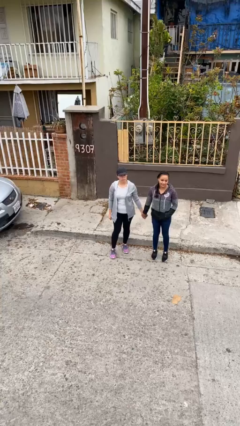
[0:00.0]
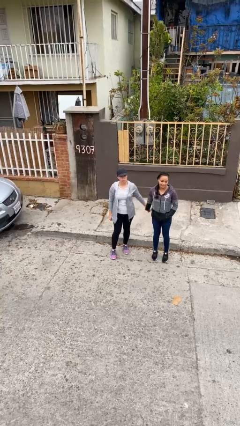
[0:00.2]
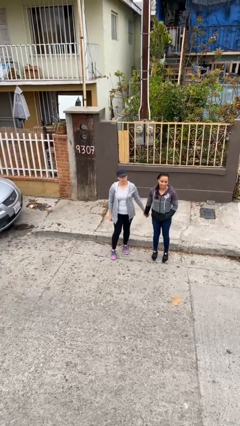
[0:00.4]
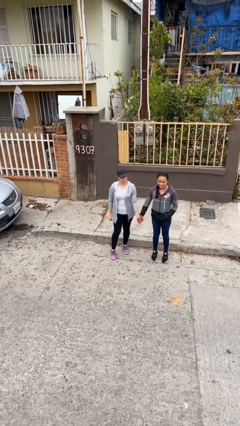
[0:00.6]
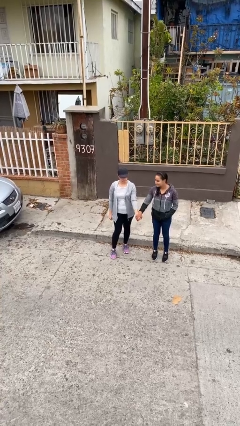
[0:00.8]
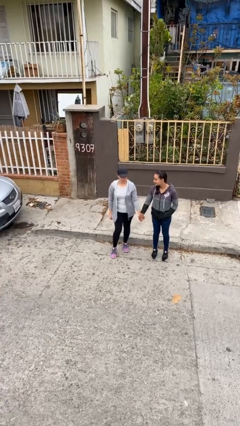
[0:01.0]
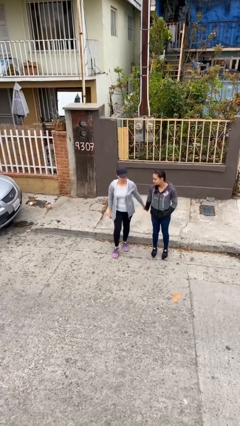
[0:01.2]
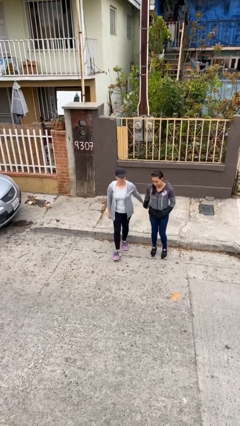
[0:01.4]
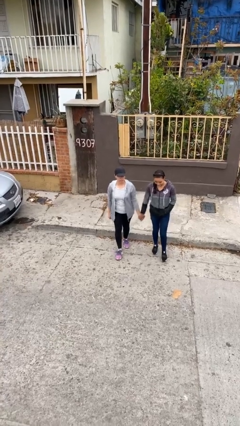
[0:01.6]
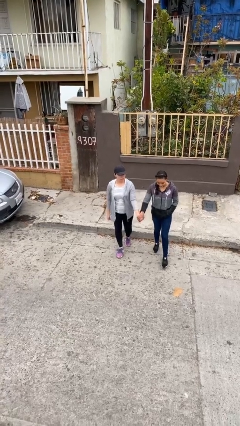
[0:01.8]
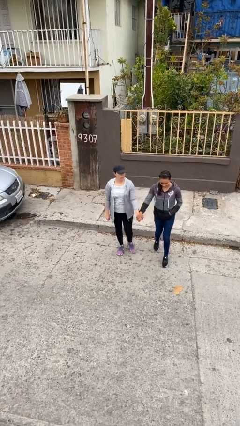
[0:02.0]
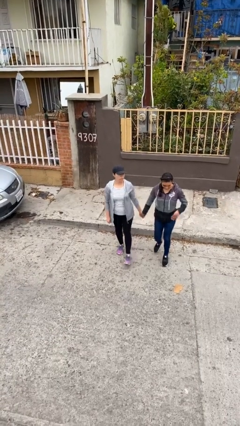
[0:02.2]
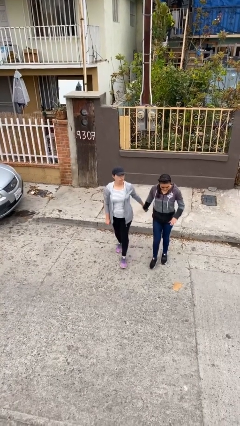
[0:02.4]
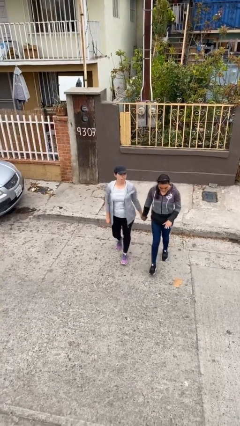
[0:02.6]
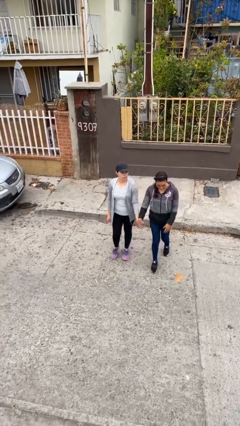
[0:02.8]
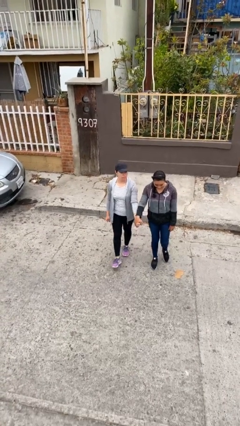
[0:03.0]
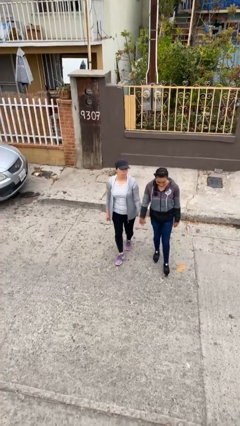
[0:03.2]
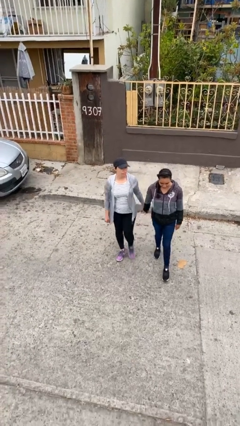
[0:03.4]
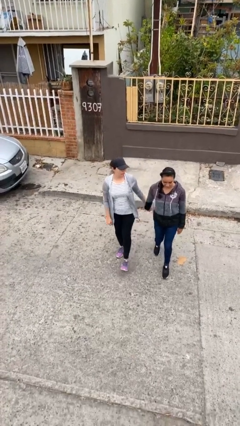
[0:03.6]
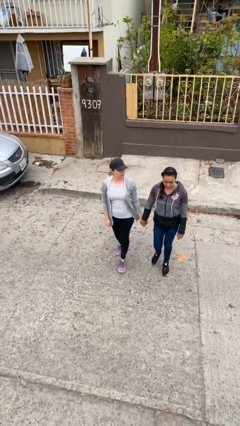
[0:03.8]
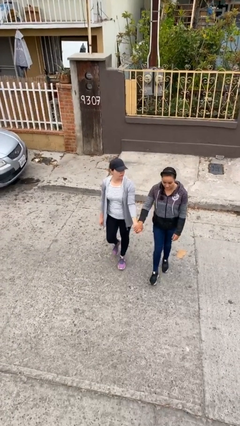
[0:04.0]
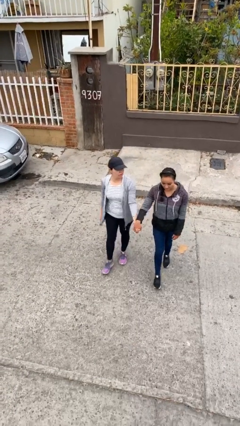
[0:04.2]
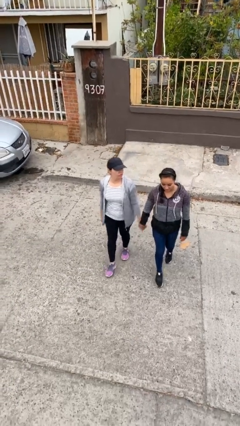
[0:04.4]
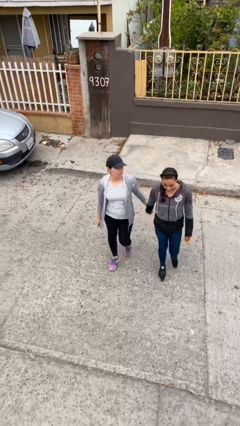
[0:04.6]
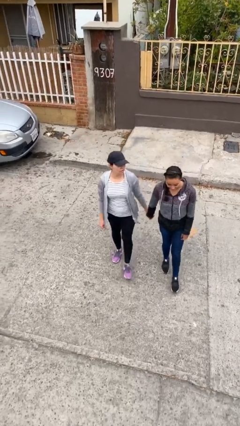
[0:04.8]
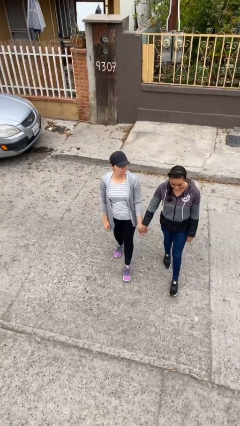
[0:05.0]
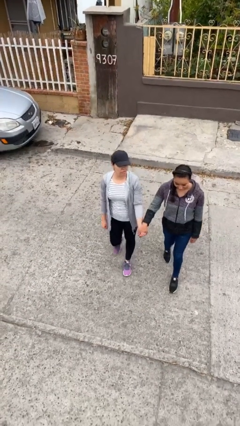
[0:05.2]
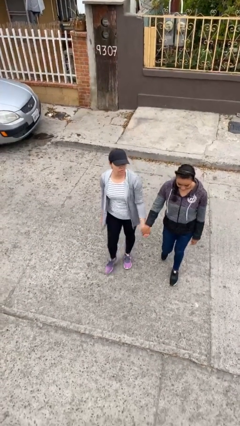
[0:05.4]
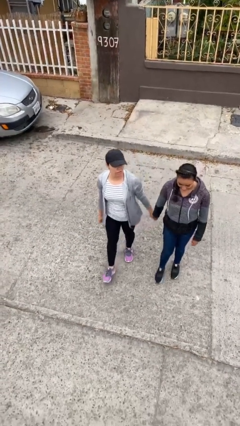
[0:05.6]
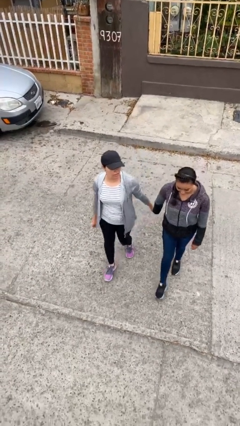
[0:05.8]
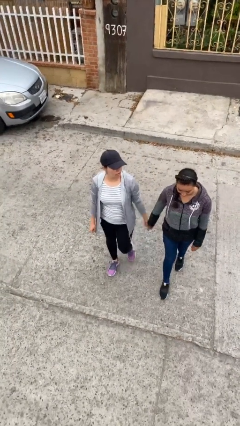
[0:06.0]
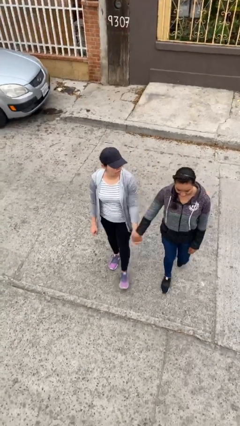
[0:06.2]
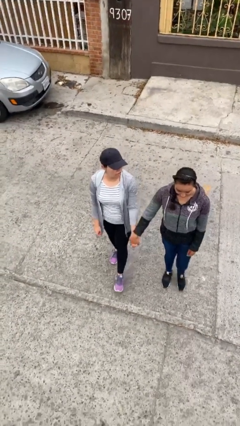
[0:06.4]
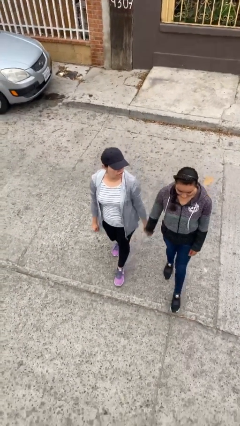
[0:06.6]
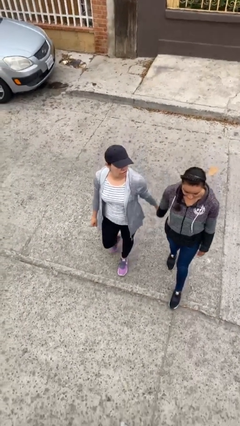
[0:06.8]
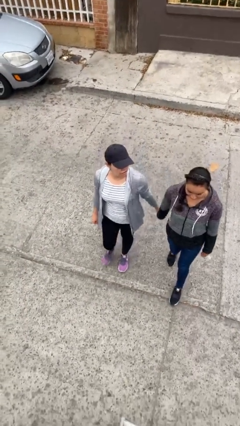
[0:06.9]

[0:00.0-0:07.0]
person holds hand

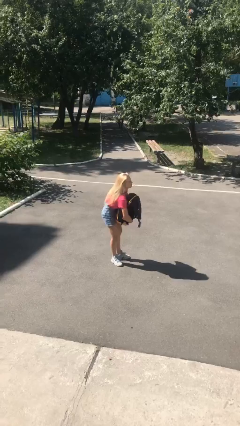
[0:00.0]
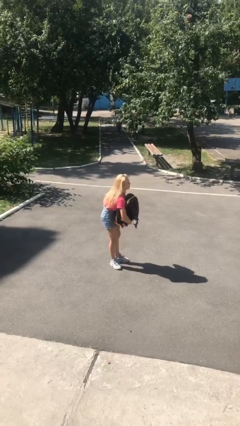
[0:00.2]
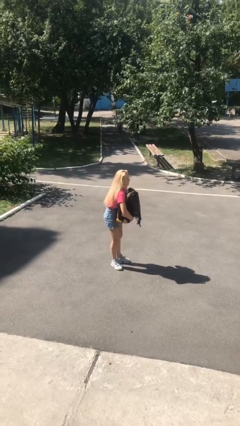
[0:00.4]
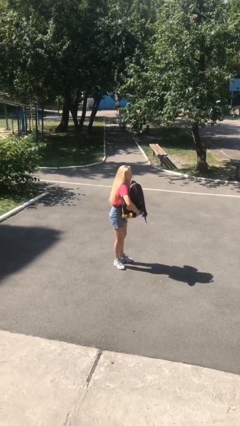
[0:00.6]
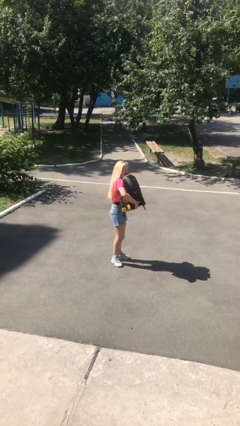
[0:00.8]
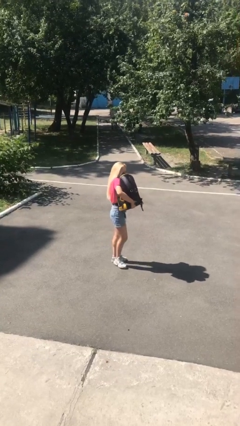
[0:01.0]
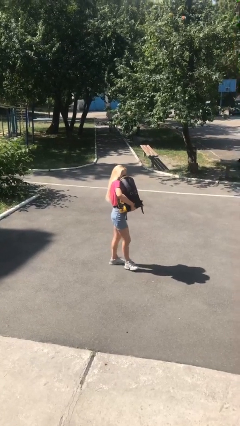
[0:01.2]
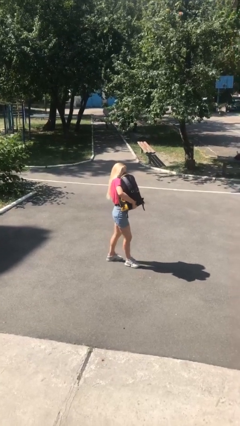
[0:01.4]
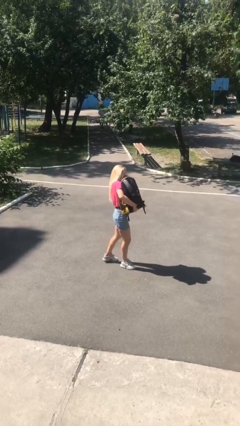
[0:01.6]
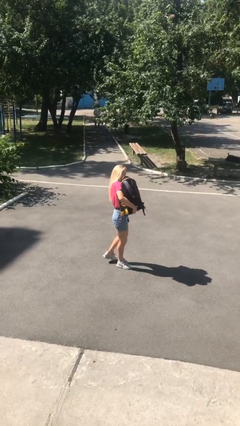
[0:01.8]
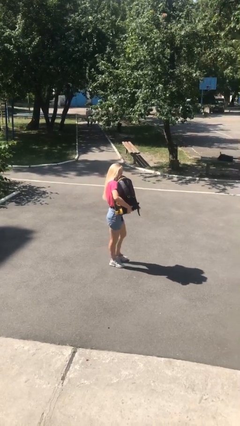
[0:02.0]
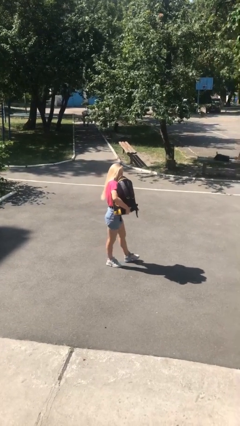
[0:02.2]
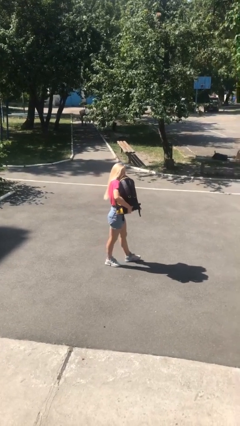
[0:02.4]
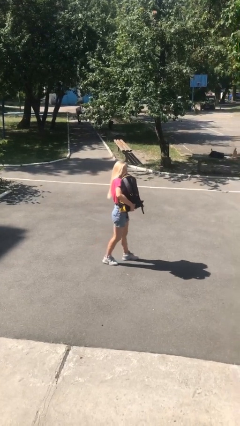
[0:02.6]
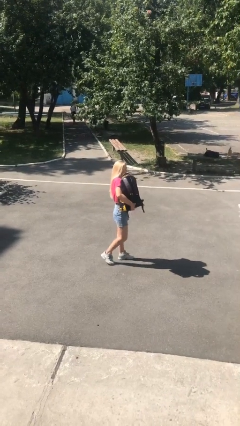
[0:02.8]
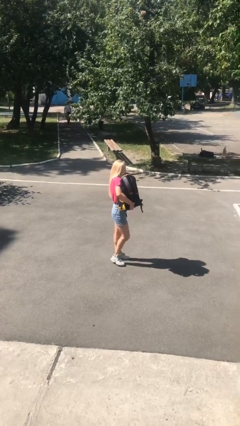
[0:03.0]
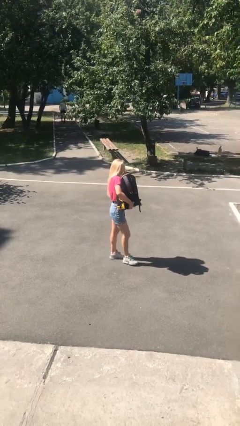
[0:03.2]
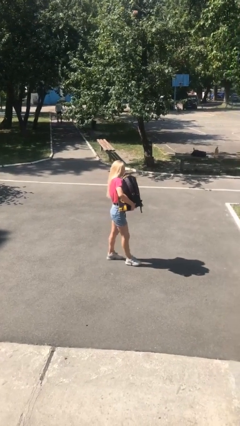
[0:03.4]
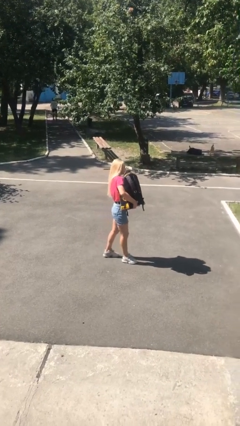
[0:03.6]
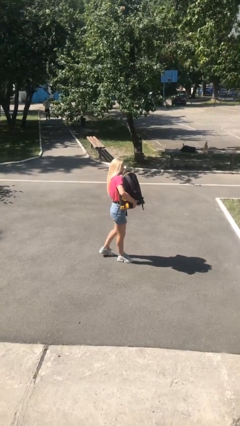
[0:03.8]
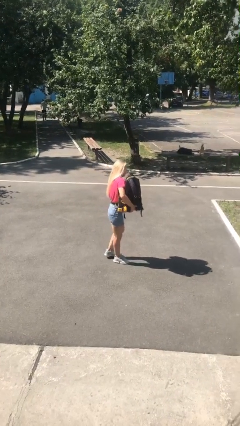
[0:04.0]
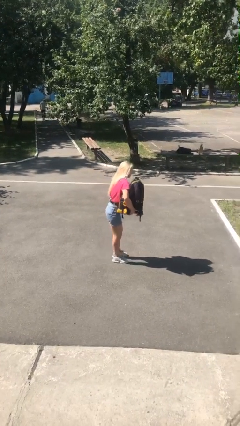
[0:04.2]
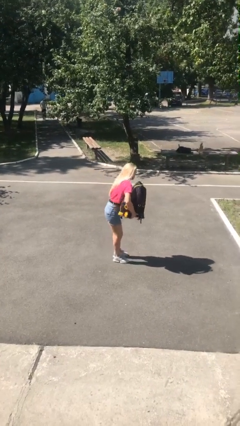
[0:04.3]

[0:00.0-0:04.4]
person carries heavy object

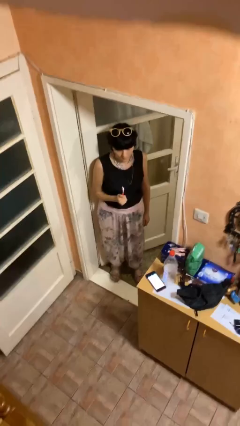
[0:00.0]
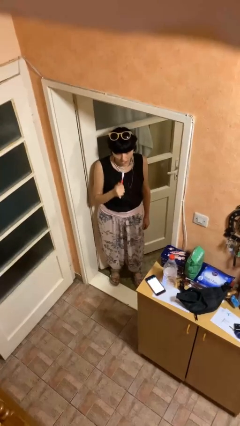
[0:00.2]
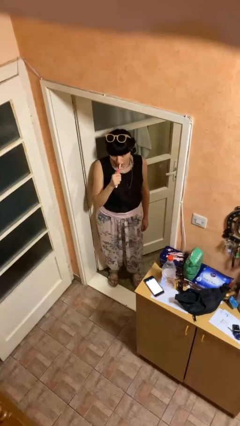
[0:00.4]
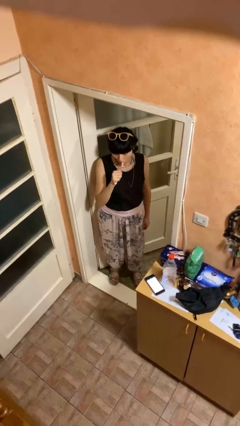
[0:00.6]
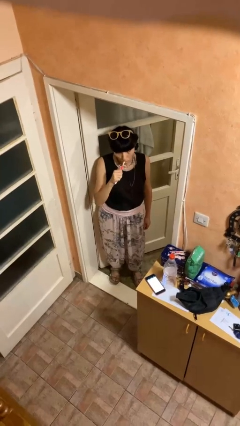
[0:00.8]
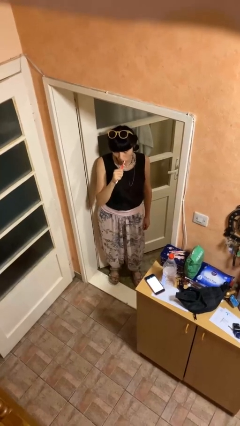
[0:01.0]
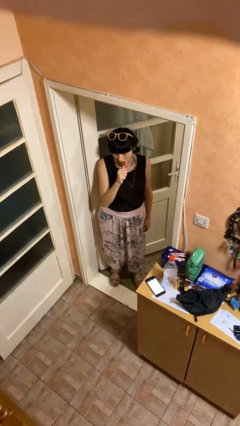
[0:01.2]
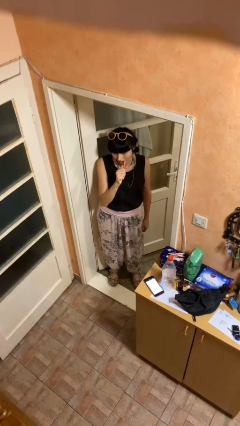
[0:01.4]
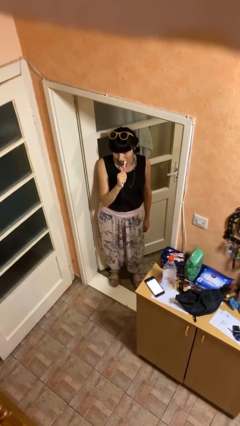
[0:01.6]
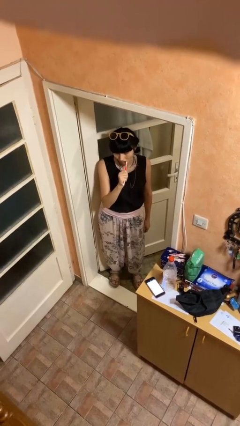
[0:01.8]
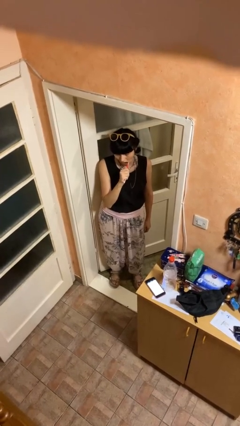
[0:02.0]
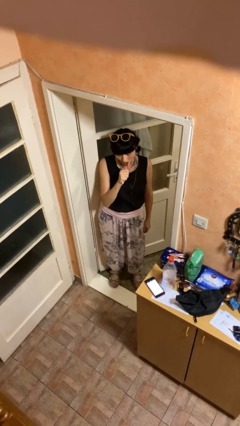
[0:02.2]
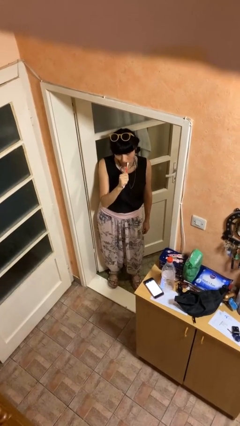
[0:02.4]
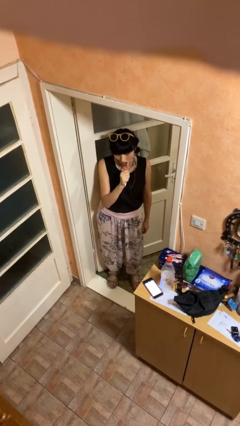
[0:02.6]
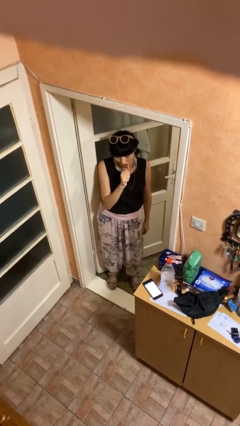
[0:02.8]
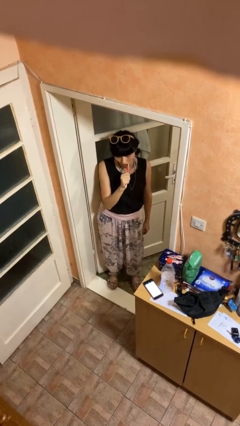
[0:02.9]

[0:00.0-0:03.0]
person brushes teeth

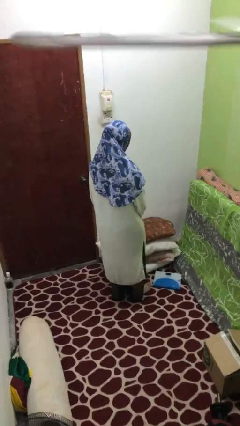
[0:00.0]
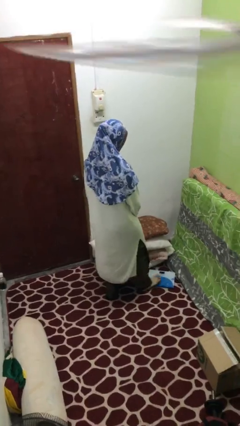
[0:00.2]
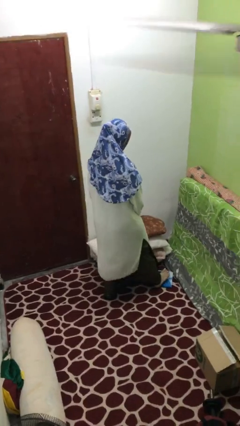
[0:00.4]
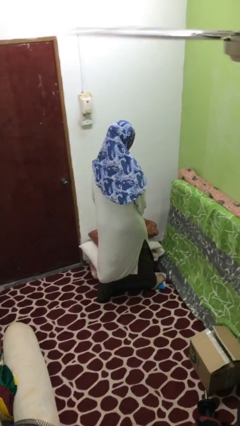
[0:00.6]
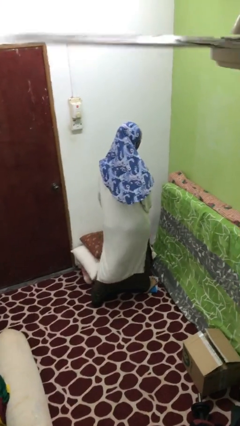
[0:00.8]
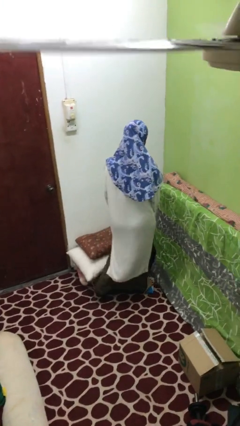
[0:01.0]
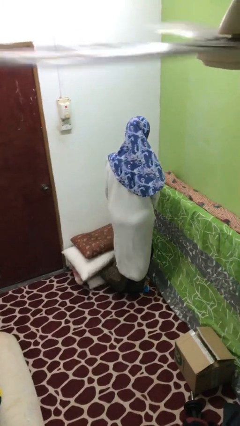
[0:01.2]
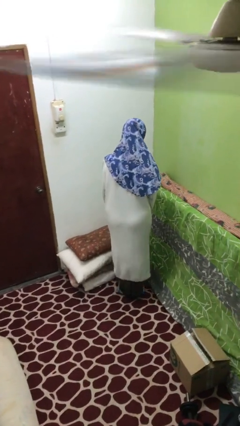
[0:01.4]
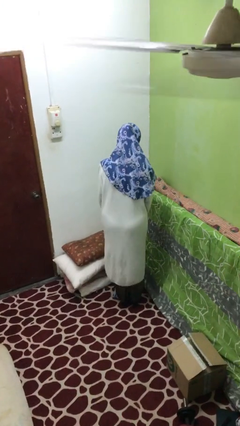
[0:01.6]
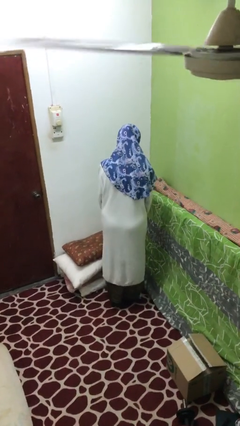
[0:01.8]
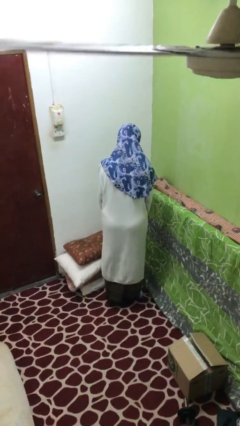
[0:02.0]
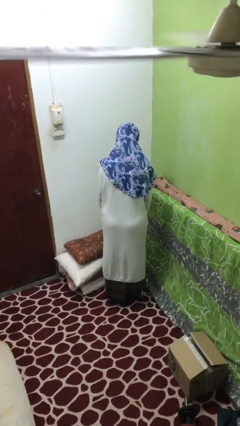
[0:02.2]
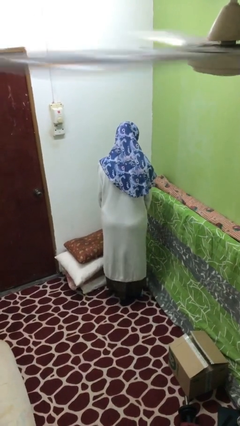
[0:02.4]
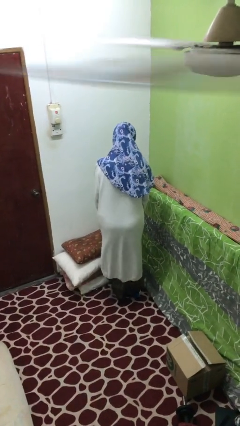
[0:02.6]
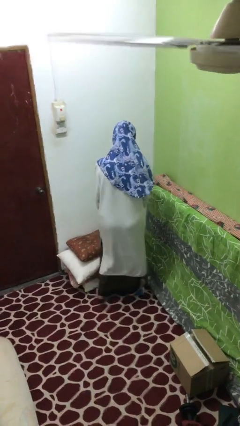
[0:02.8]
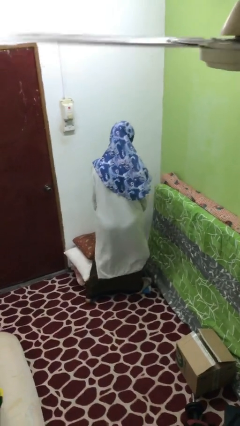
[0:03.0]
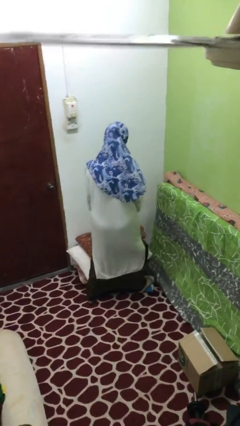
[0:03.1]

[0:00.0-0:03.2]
person uses bodyweight scale

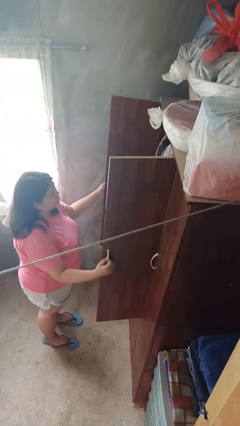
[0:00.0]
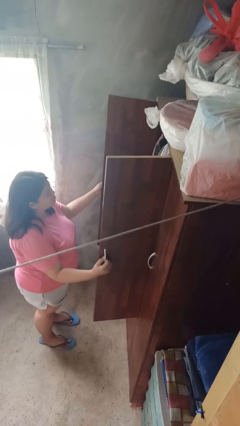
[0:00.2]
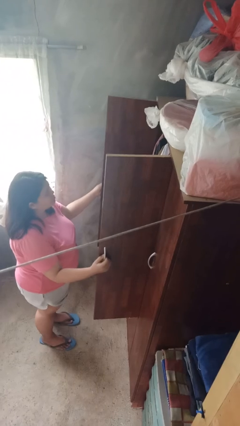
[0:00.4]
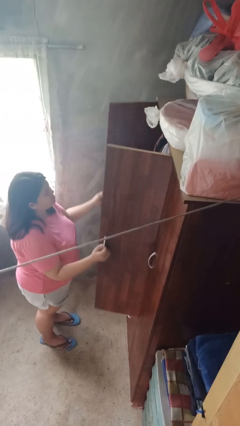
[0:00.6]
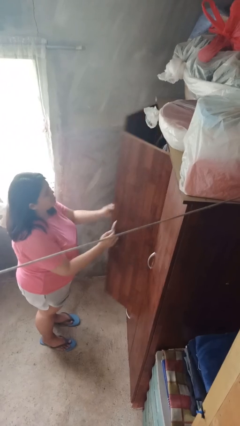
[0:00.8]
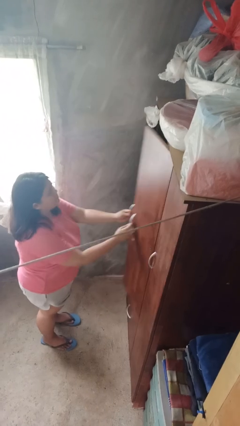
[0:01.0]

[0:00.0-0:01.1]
person closes closet door
